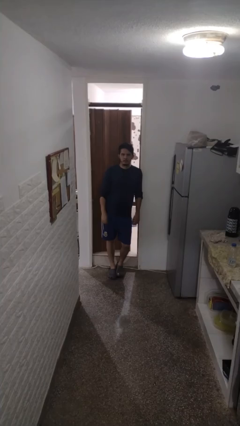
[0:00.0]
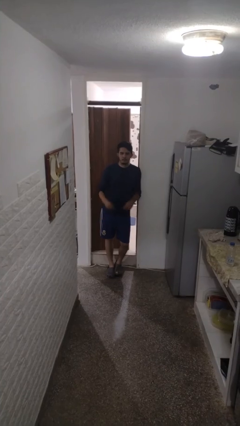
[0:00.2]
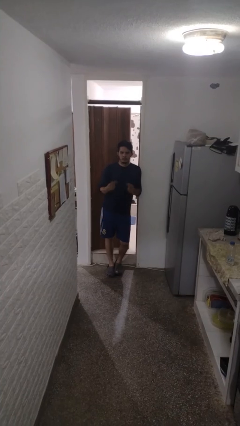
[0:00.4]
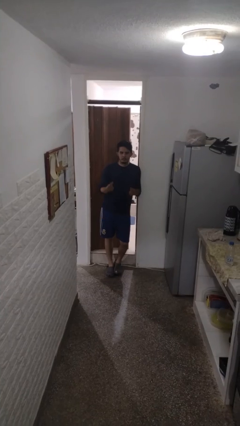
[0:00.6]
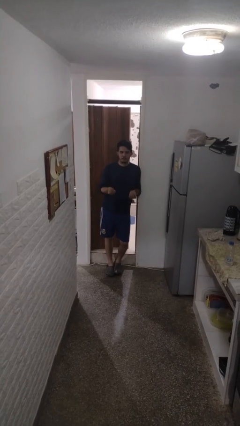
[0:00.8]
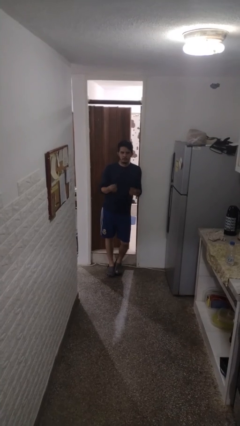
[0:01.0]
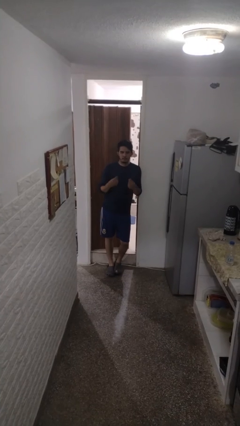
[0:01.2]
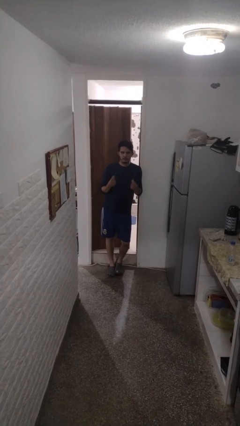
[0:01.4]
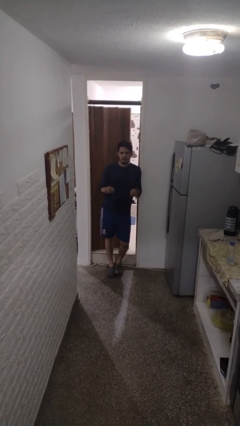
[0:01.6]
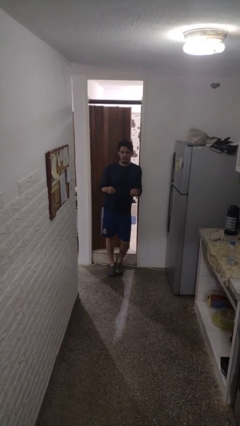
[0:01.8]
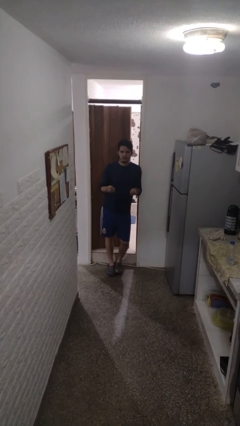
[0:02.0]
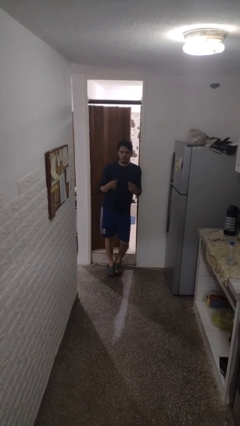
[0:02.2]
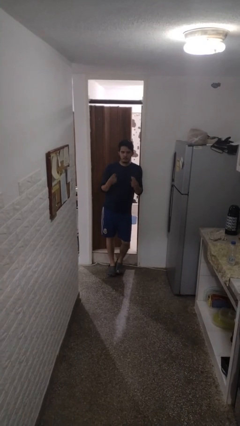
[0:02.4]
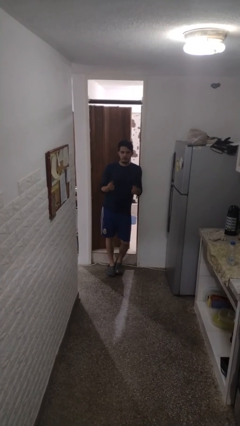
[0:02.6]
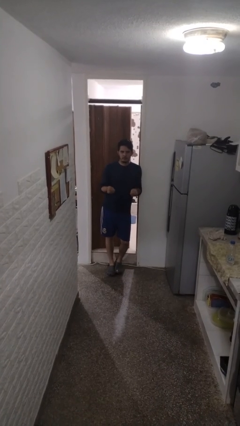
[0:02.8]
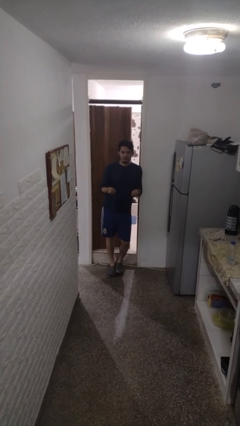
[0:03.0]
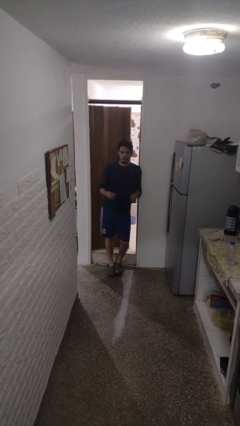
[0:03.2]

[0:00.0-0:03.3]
person snaps fingers

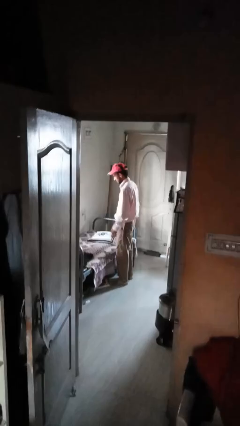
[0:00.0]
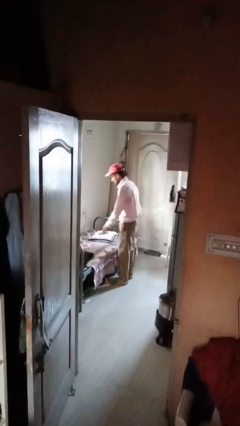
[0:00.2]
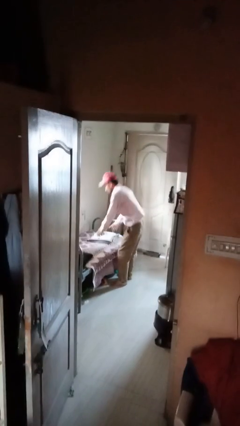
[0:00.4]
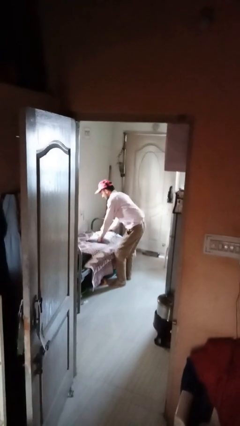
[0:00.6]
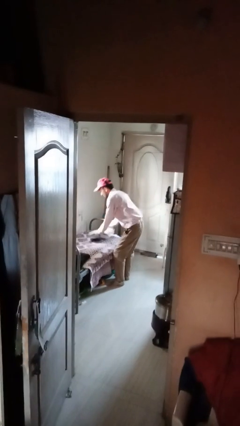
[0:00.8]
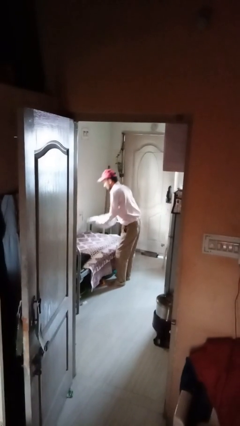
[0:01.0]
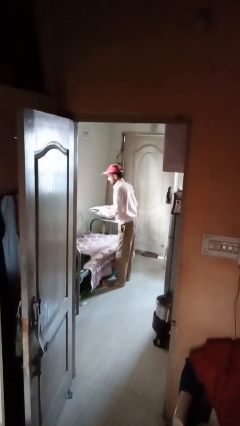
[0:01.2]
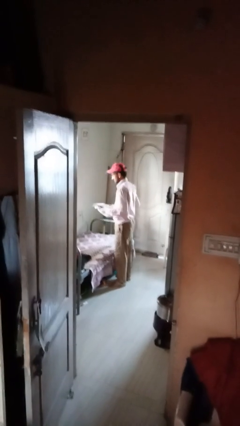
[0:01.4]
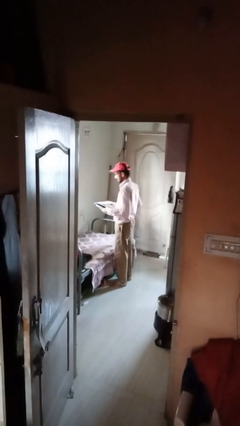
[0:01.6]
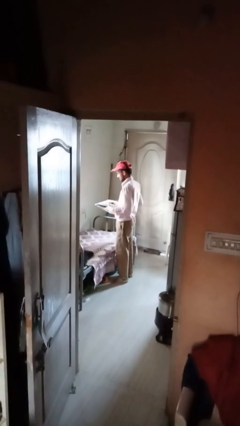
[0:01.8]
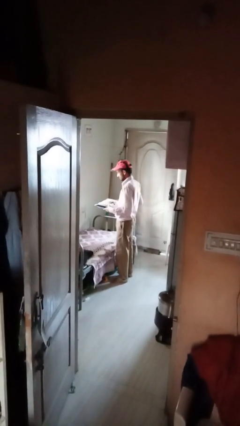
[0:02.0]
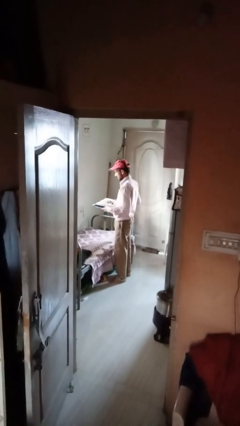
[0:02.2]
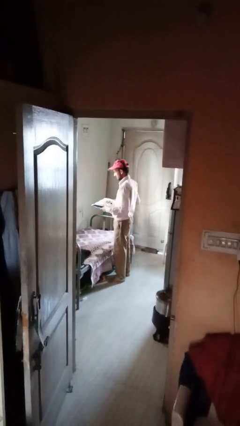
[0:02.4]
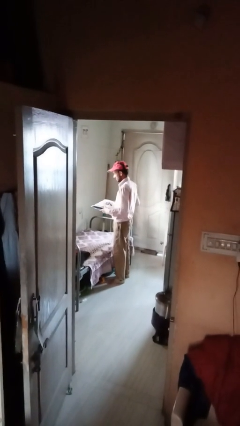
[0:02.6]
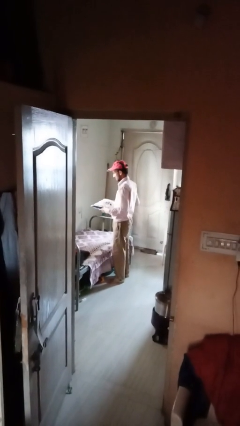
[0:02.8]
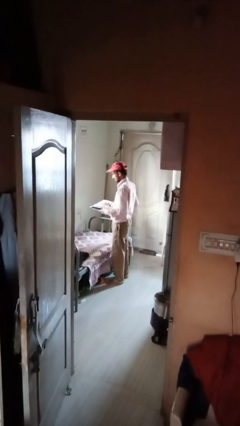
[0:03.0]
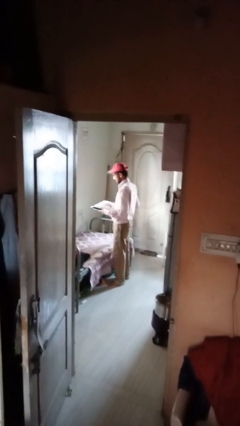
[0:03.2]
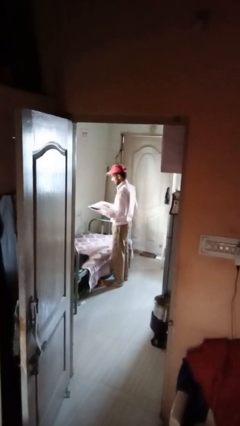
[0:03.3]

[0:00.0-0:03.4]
person picks up object from bed

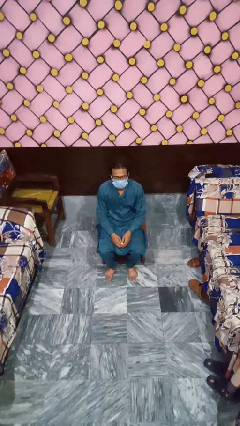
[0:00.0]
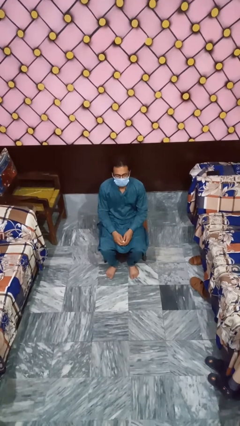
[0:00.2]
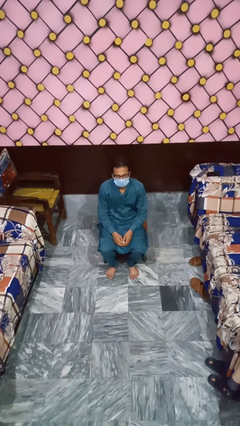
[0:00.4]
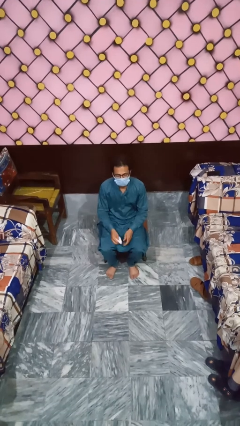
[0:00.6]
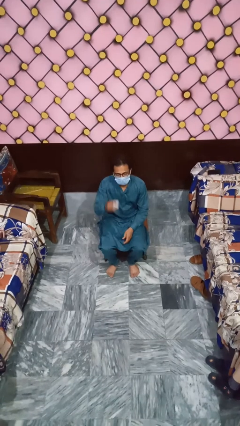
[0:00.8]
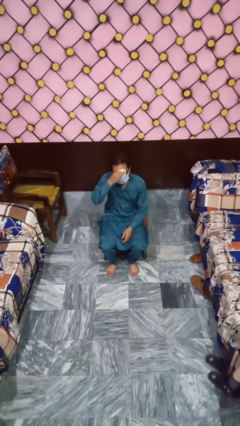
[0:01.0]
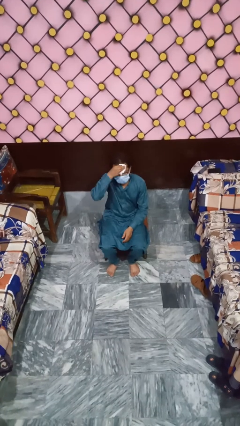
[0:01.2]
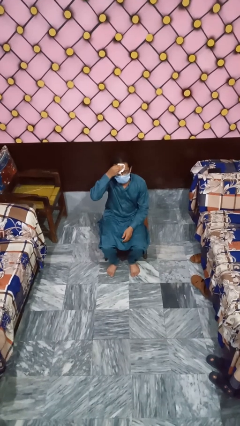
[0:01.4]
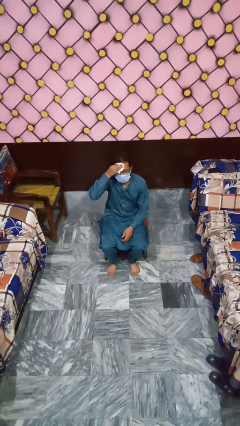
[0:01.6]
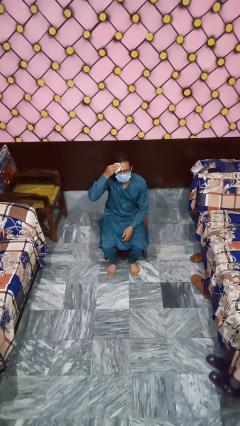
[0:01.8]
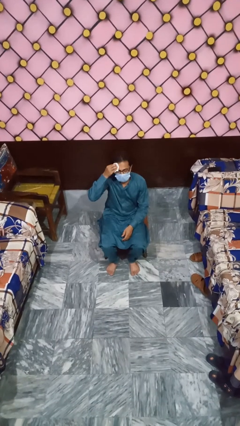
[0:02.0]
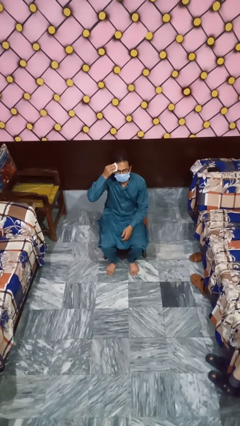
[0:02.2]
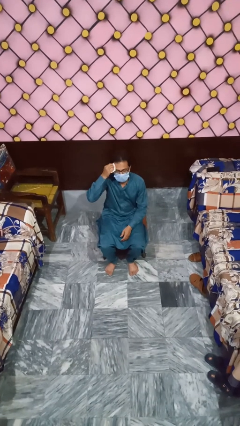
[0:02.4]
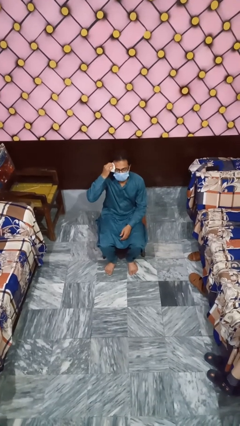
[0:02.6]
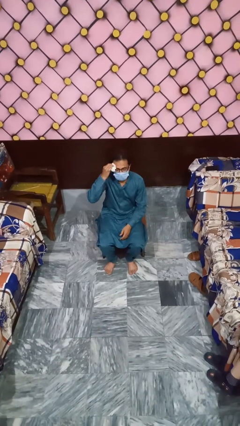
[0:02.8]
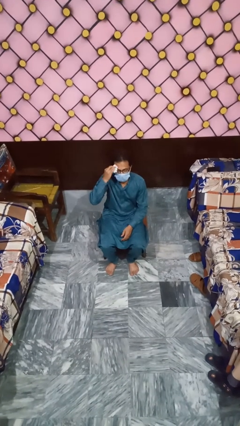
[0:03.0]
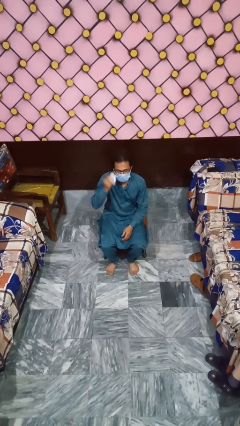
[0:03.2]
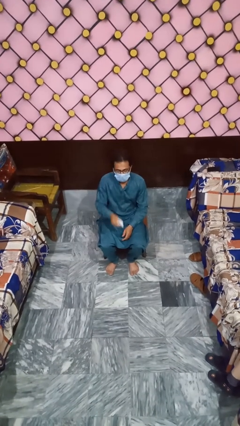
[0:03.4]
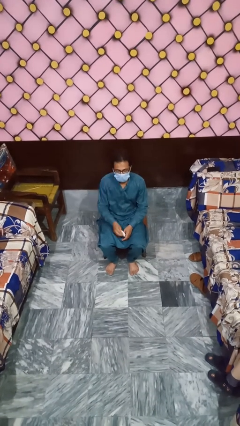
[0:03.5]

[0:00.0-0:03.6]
person wipes mouth with napkin

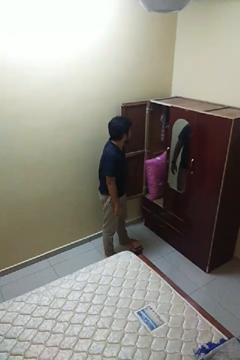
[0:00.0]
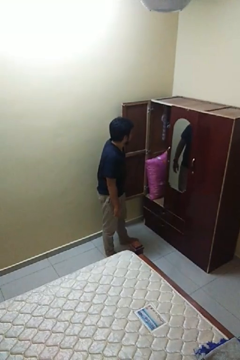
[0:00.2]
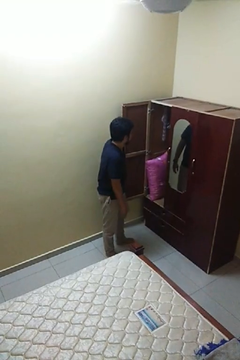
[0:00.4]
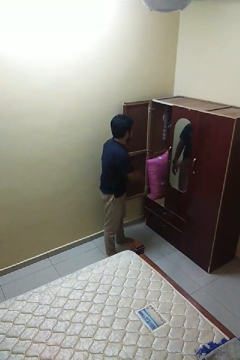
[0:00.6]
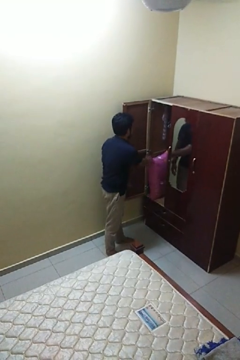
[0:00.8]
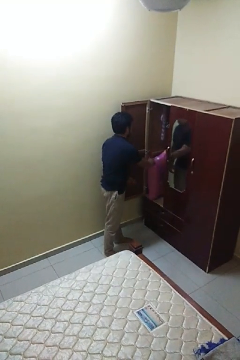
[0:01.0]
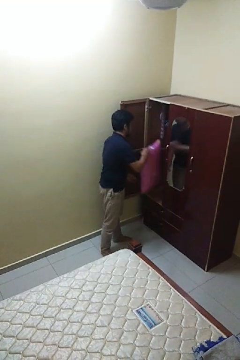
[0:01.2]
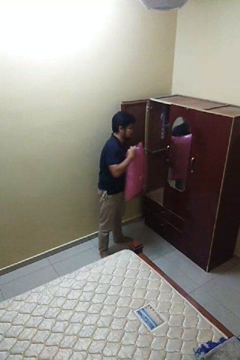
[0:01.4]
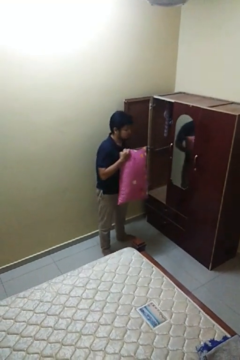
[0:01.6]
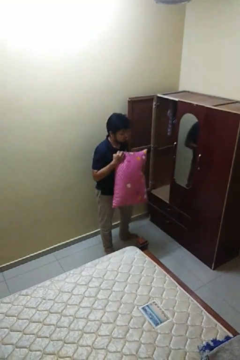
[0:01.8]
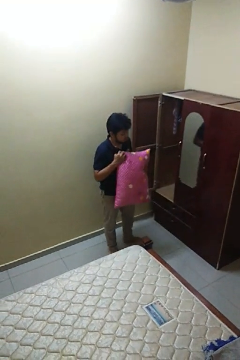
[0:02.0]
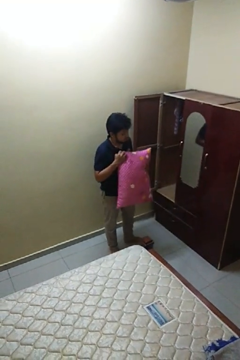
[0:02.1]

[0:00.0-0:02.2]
person picks up object from cabinet

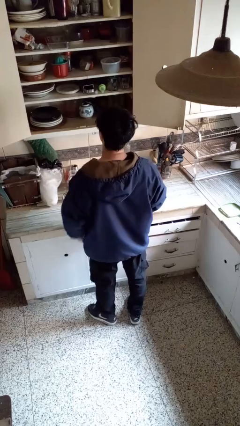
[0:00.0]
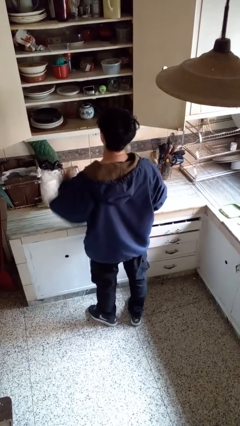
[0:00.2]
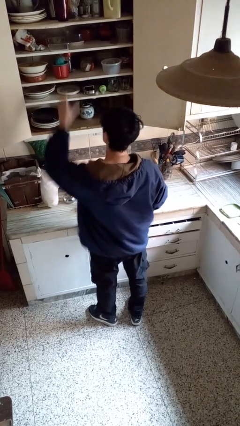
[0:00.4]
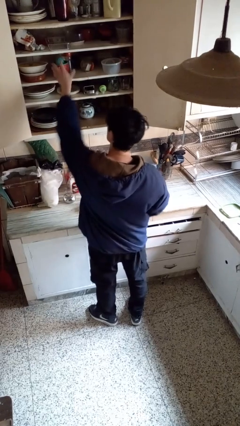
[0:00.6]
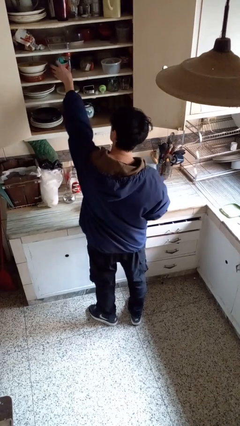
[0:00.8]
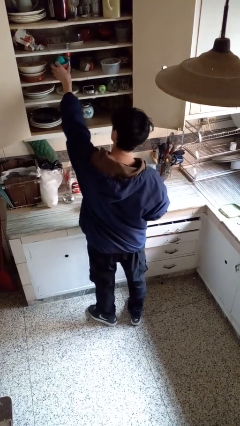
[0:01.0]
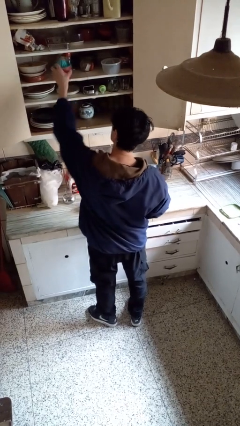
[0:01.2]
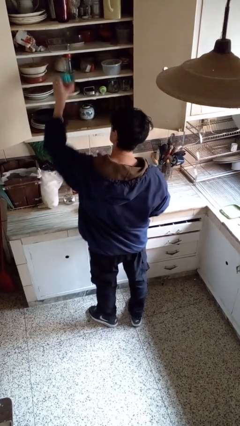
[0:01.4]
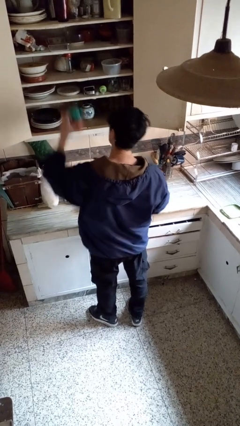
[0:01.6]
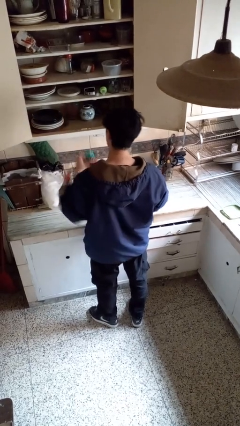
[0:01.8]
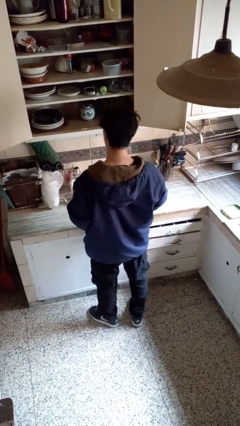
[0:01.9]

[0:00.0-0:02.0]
person takes object from cabinet

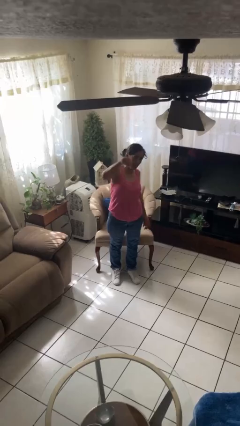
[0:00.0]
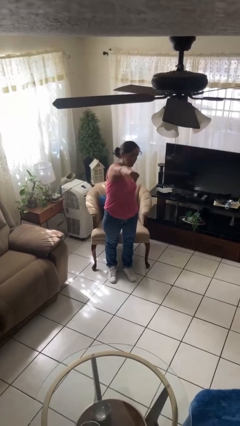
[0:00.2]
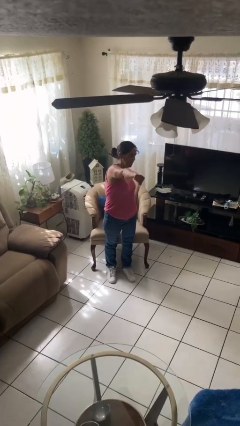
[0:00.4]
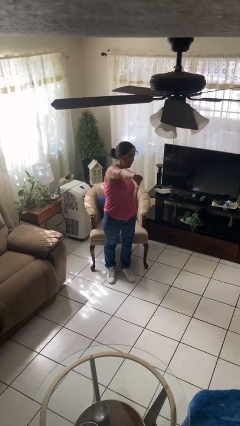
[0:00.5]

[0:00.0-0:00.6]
person karate chop

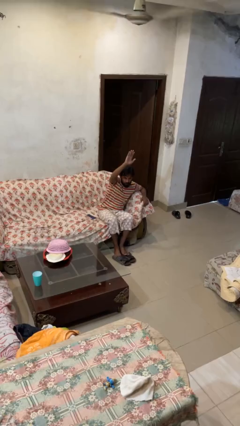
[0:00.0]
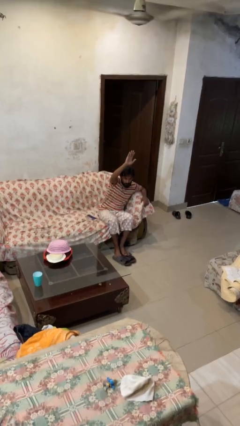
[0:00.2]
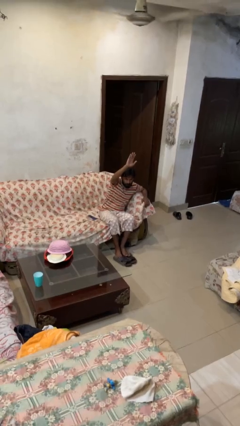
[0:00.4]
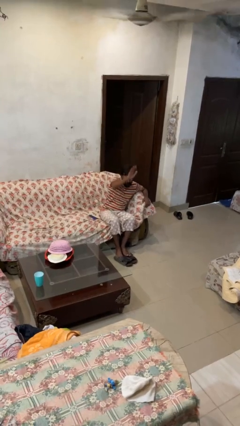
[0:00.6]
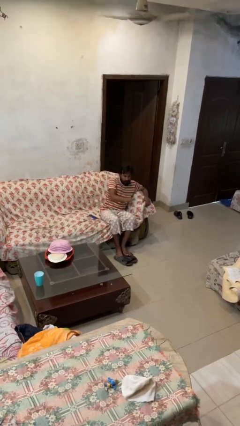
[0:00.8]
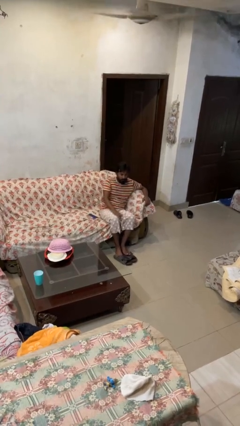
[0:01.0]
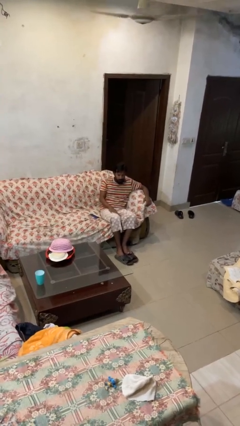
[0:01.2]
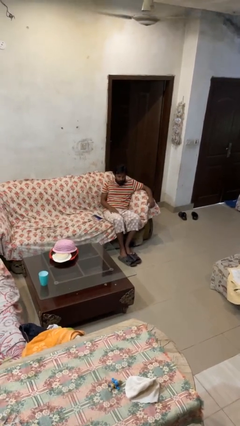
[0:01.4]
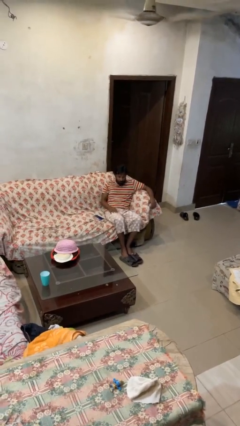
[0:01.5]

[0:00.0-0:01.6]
person gestures lower hand

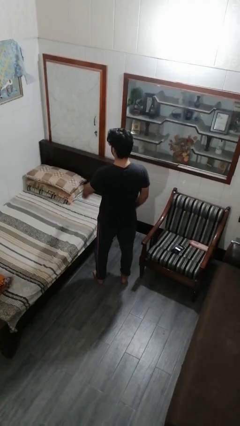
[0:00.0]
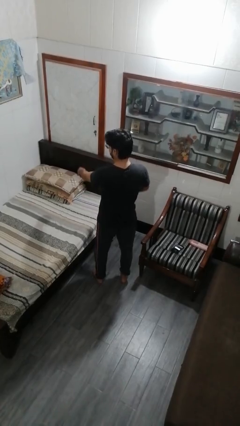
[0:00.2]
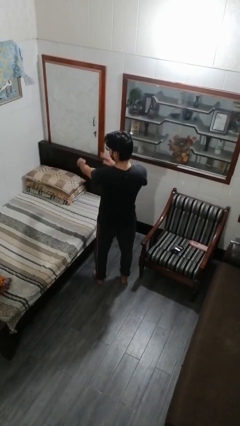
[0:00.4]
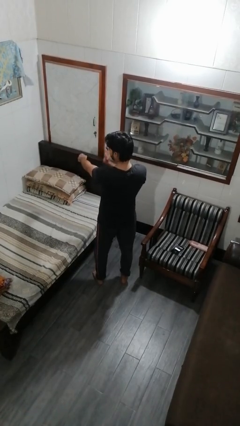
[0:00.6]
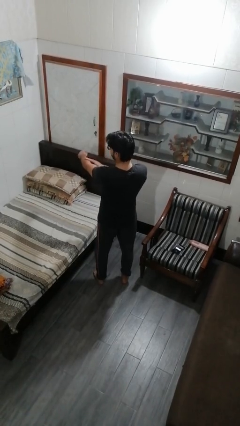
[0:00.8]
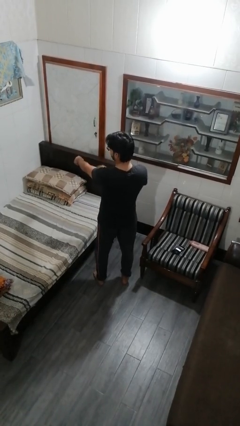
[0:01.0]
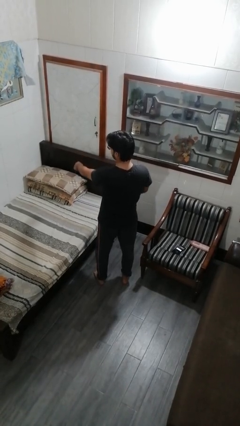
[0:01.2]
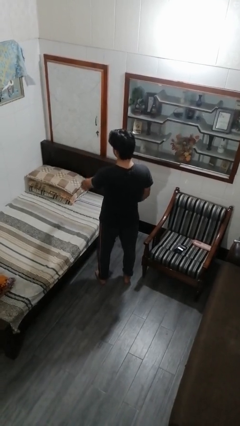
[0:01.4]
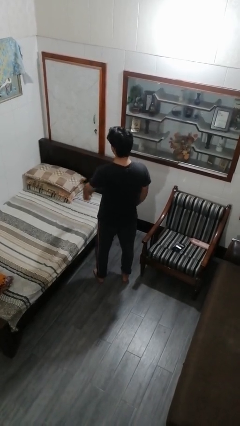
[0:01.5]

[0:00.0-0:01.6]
person swats bug
